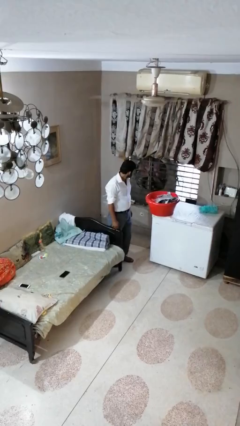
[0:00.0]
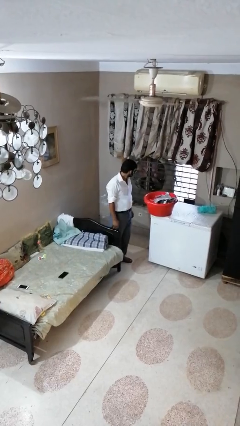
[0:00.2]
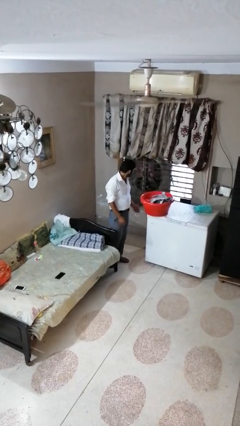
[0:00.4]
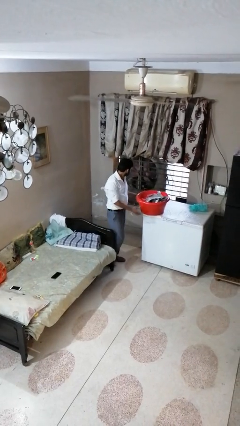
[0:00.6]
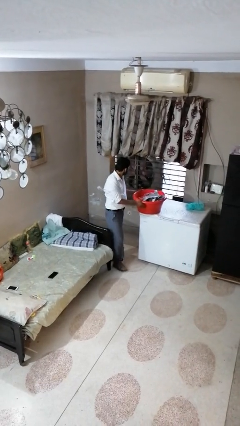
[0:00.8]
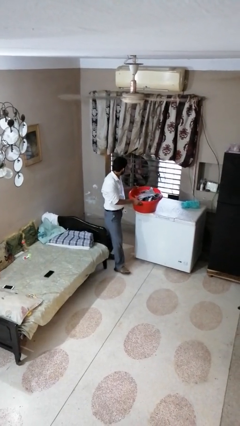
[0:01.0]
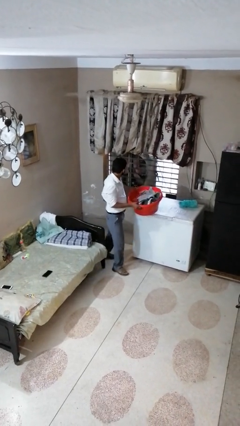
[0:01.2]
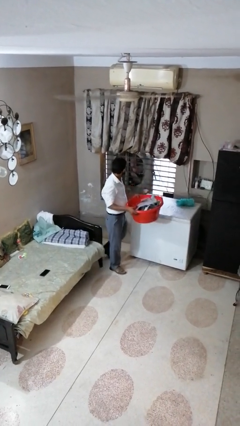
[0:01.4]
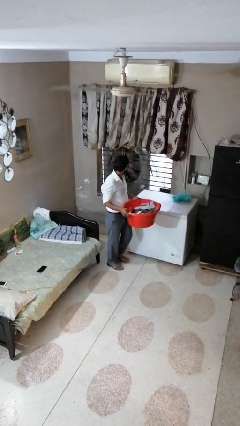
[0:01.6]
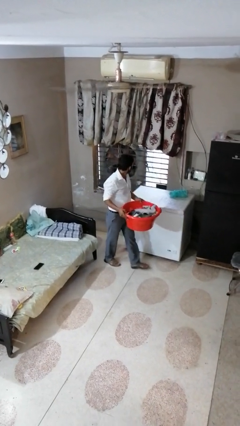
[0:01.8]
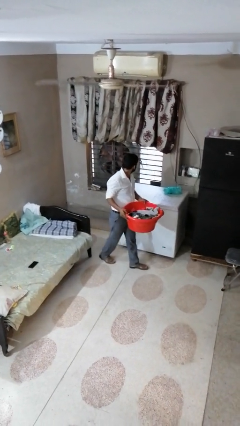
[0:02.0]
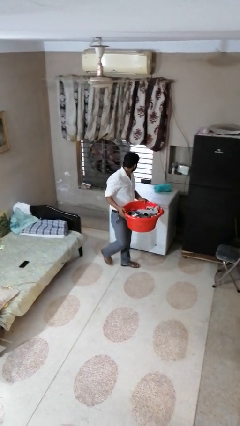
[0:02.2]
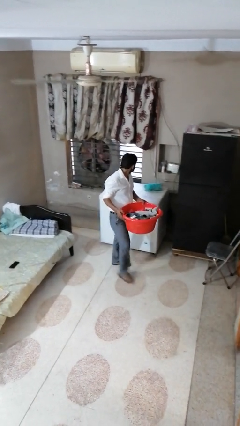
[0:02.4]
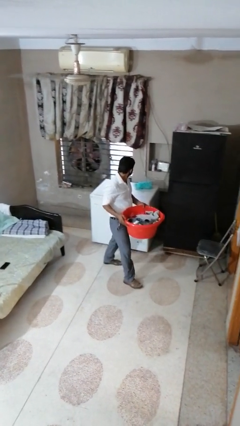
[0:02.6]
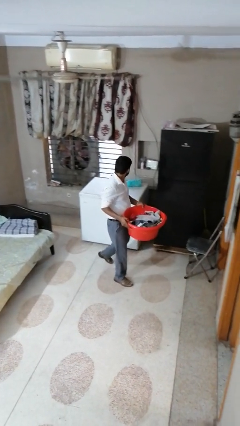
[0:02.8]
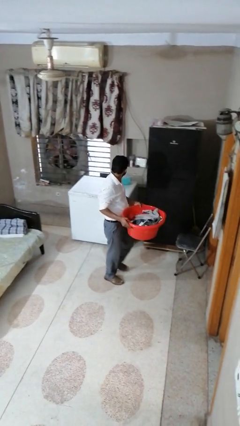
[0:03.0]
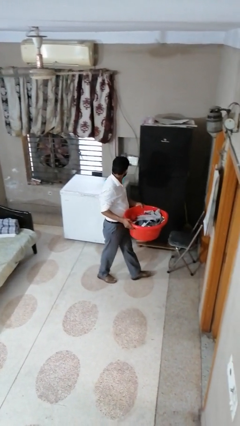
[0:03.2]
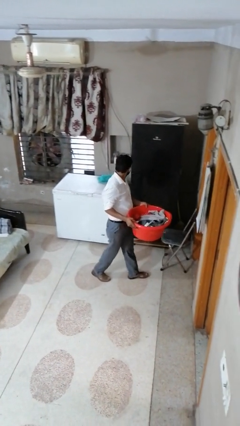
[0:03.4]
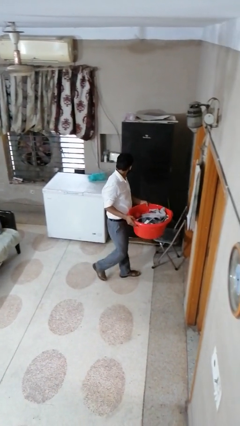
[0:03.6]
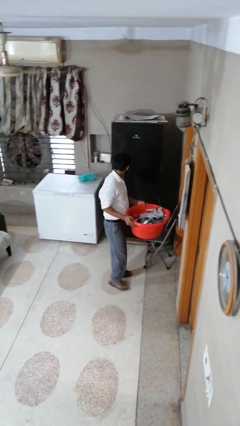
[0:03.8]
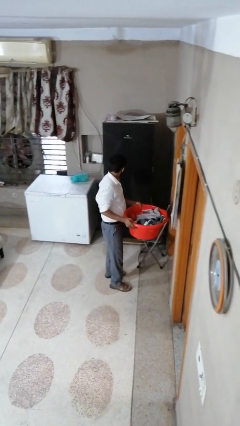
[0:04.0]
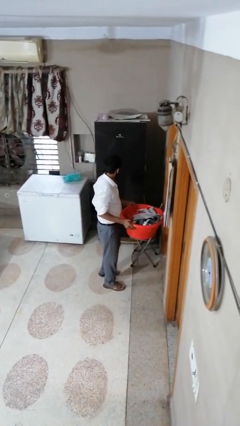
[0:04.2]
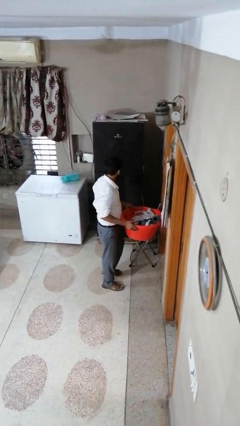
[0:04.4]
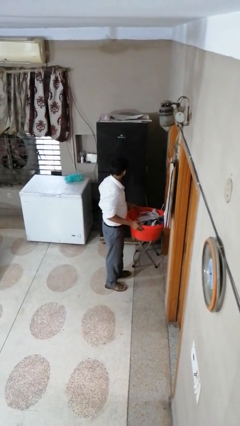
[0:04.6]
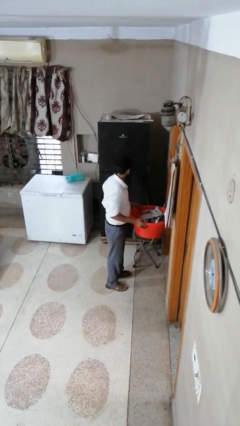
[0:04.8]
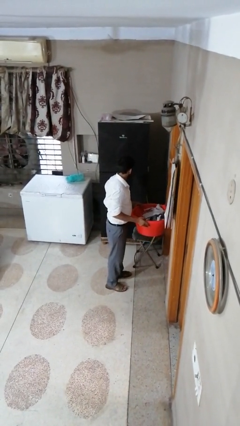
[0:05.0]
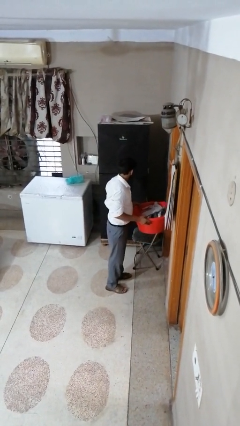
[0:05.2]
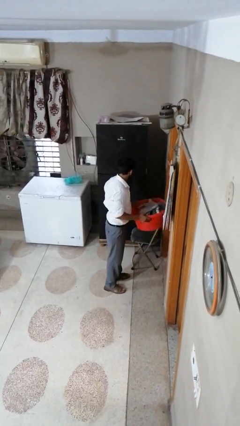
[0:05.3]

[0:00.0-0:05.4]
person carries laundry basket

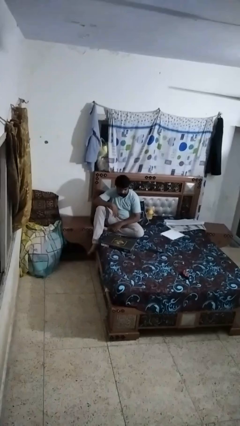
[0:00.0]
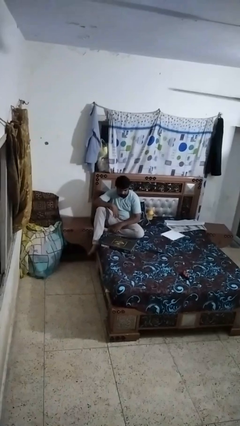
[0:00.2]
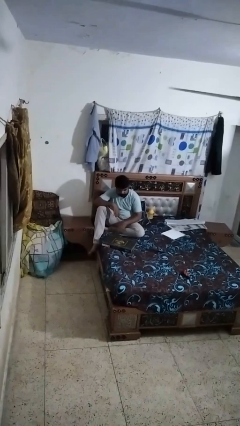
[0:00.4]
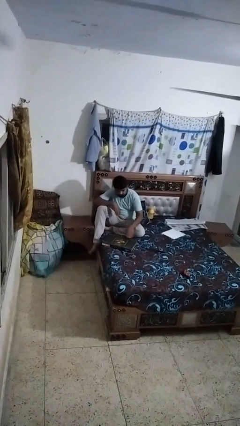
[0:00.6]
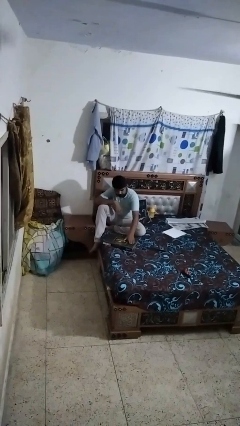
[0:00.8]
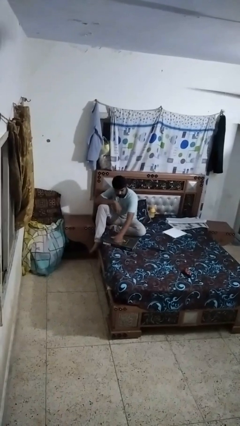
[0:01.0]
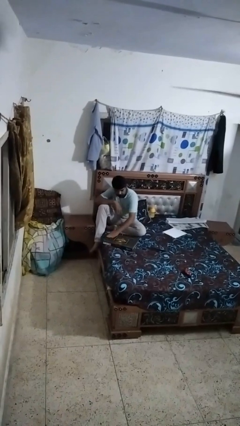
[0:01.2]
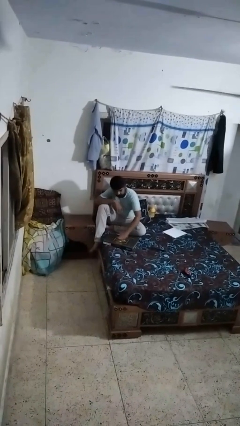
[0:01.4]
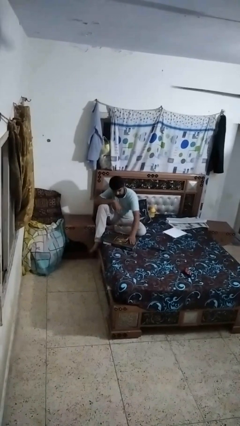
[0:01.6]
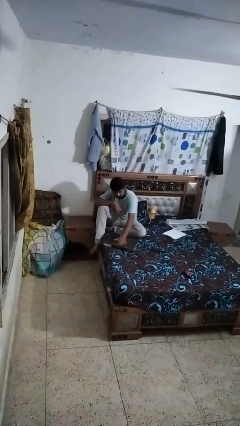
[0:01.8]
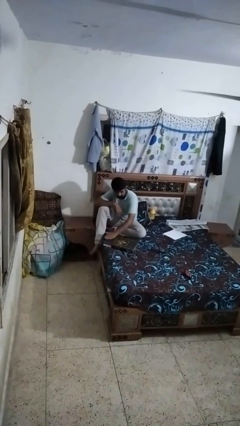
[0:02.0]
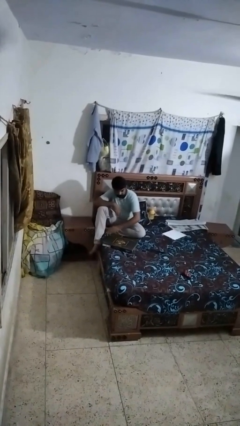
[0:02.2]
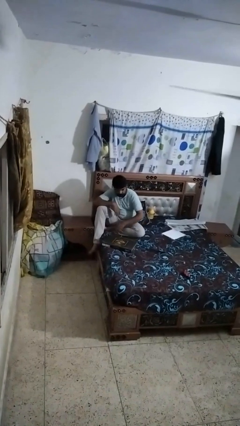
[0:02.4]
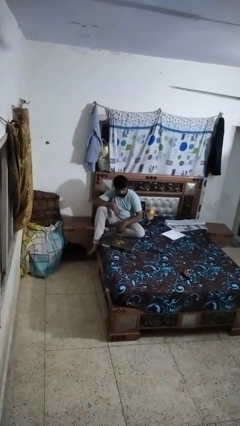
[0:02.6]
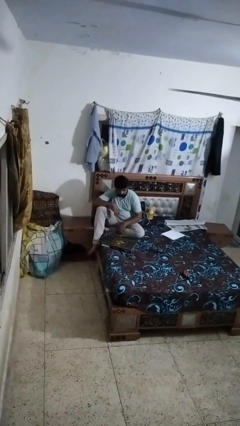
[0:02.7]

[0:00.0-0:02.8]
person waves hand over object

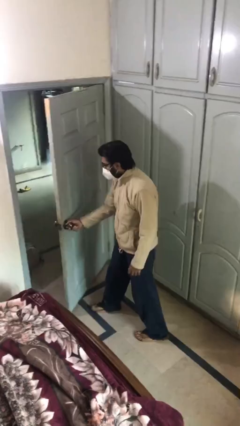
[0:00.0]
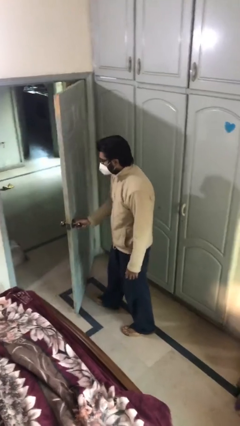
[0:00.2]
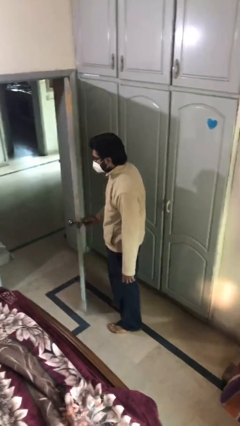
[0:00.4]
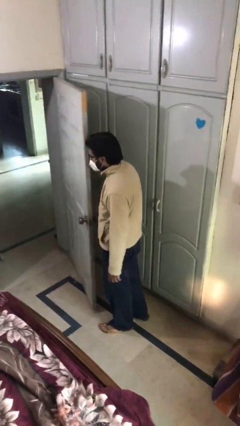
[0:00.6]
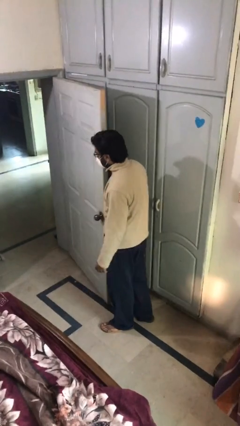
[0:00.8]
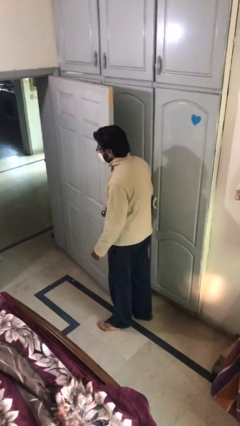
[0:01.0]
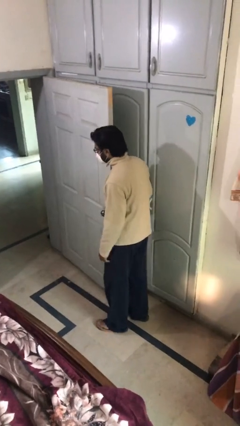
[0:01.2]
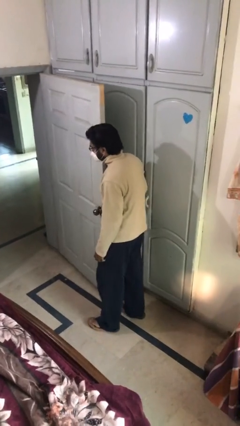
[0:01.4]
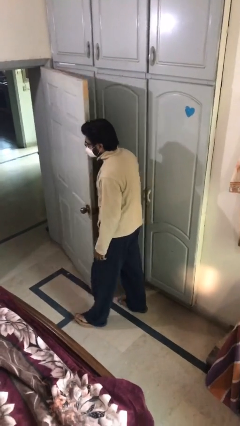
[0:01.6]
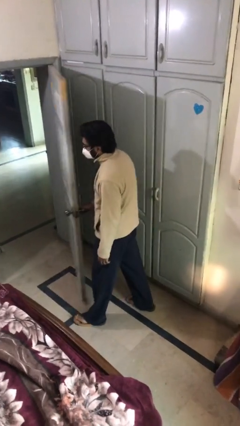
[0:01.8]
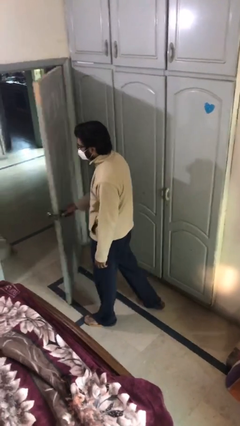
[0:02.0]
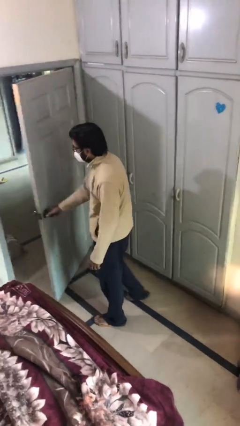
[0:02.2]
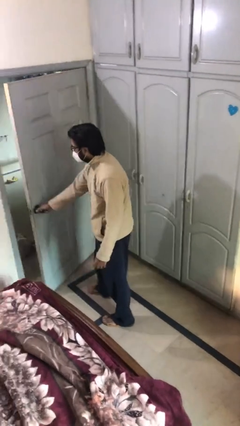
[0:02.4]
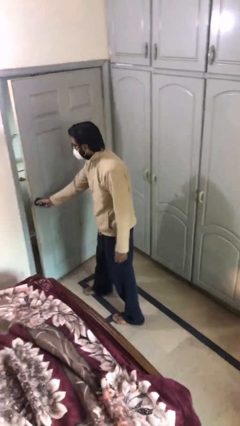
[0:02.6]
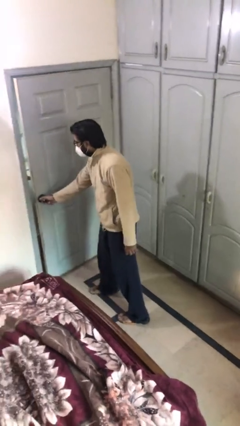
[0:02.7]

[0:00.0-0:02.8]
person closes facility door

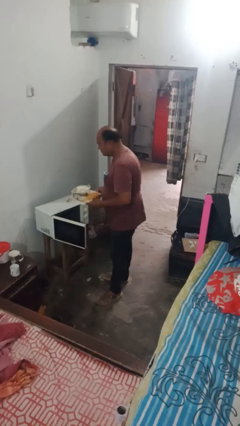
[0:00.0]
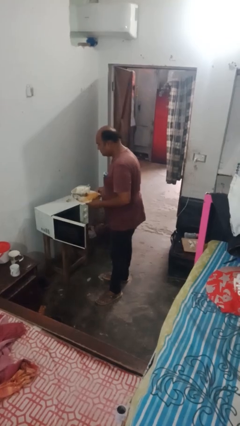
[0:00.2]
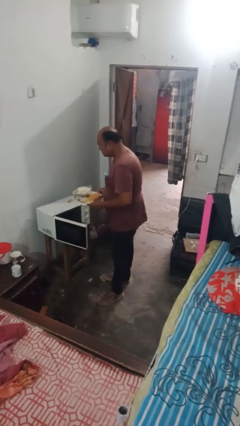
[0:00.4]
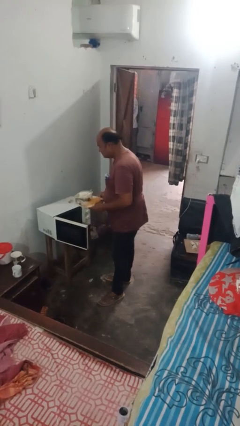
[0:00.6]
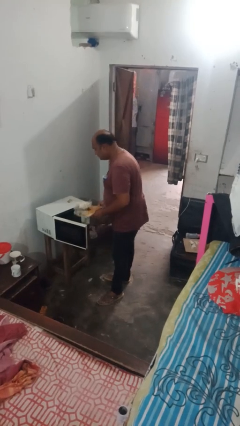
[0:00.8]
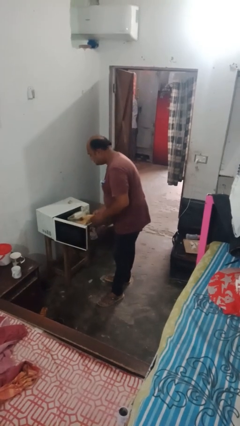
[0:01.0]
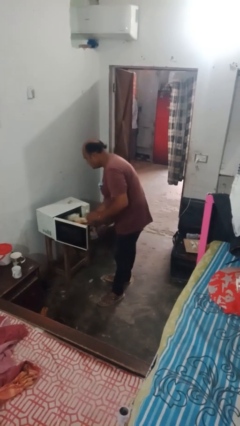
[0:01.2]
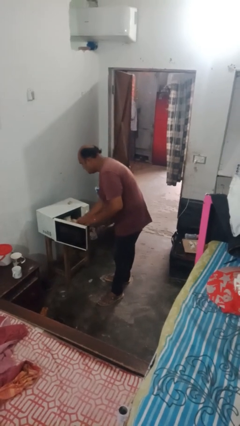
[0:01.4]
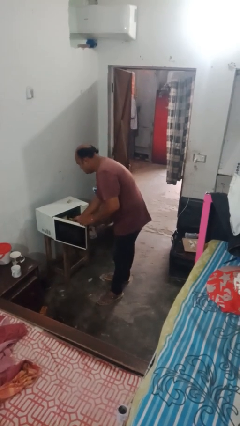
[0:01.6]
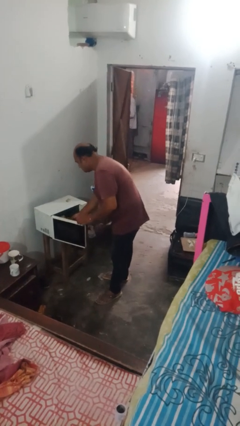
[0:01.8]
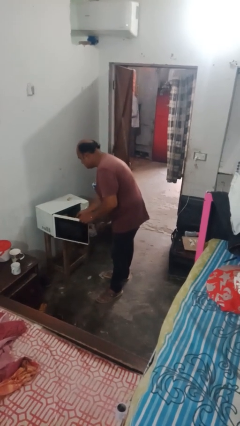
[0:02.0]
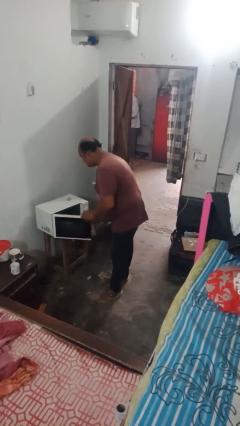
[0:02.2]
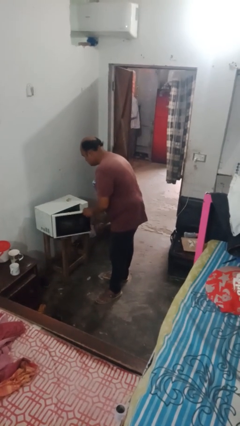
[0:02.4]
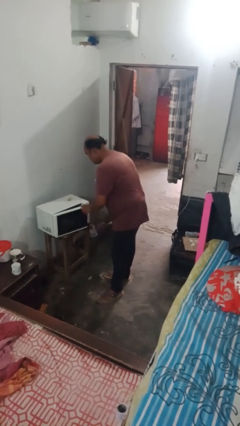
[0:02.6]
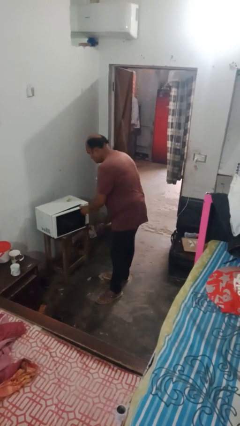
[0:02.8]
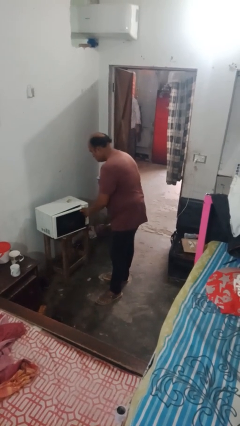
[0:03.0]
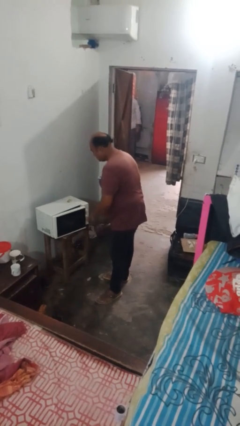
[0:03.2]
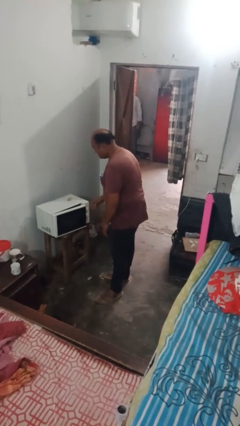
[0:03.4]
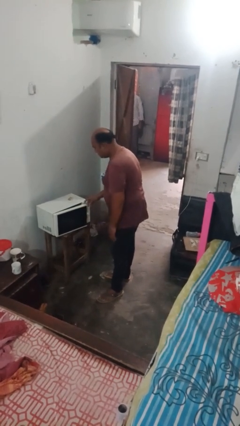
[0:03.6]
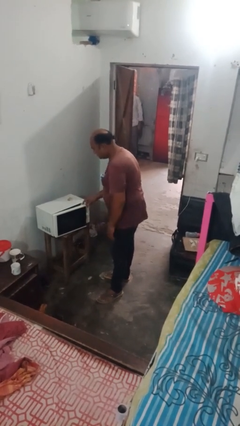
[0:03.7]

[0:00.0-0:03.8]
person puts object into microwave

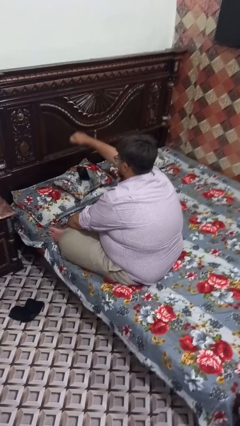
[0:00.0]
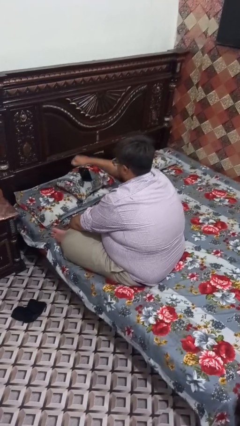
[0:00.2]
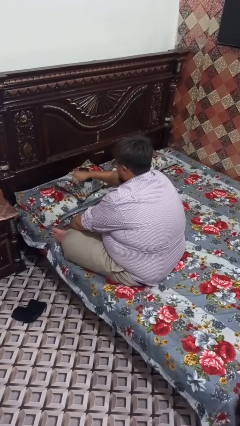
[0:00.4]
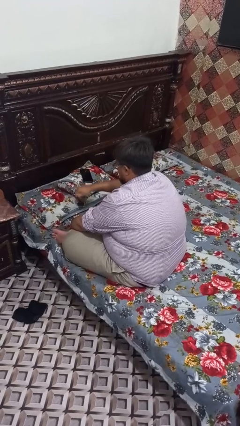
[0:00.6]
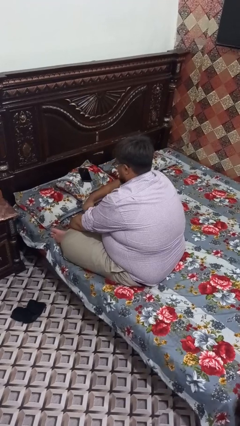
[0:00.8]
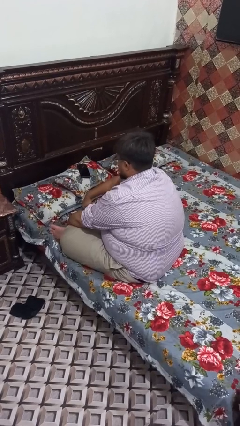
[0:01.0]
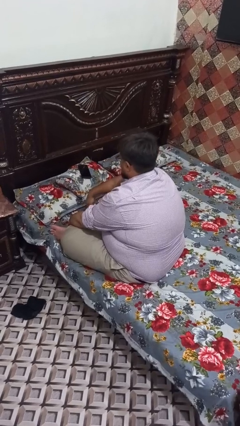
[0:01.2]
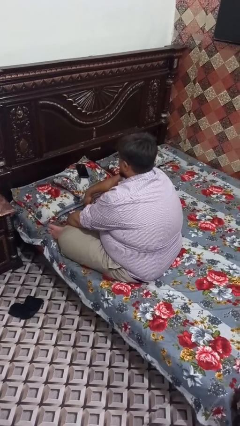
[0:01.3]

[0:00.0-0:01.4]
person punches

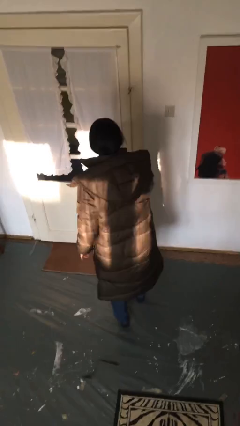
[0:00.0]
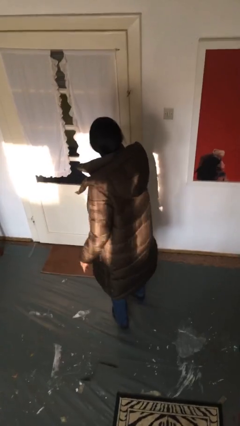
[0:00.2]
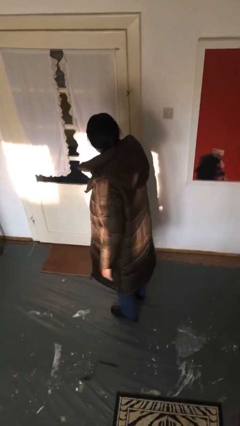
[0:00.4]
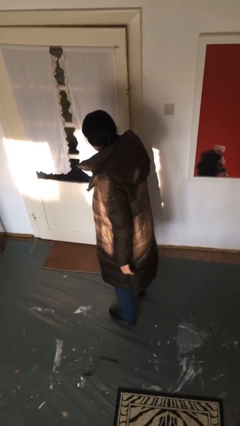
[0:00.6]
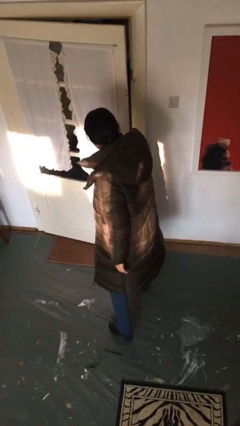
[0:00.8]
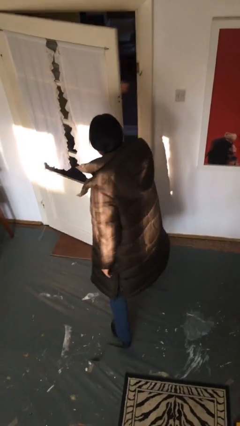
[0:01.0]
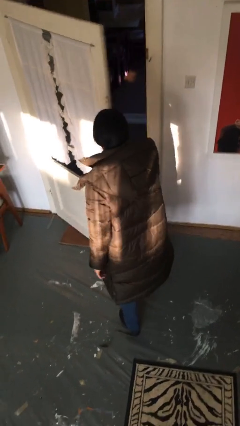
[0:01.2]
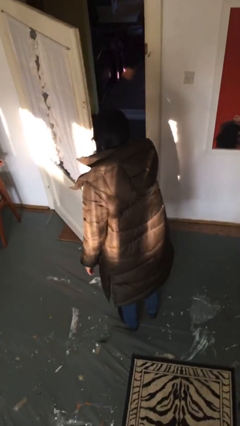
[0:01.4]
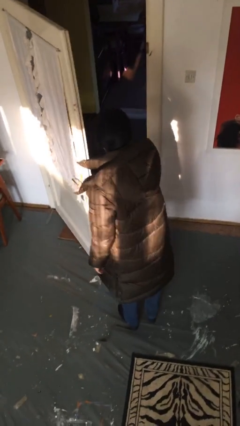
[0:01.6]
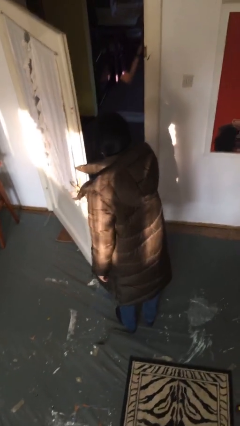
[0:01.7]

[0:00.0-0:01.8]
person opens facility door
